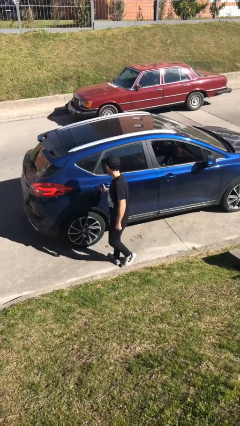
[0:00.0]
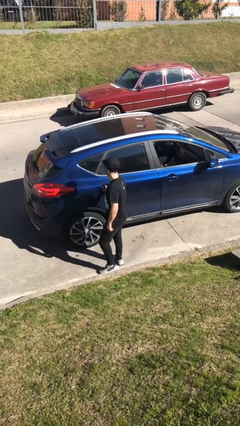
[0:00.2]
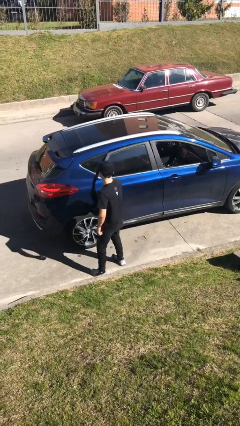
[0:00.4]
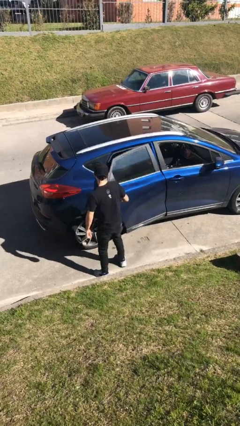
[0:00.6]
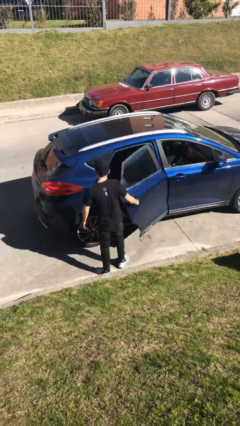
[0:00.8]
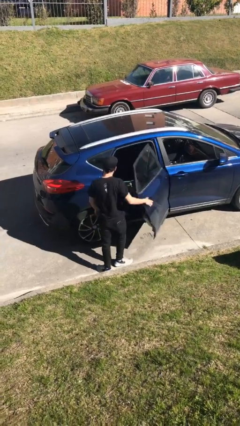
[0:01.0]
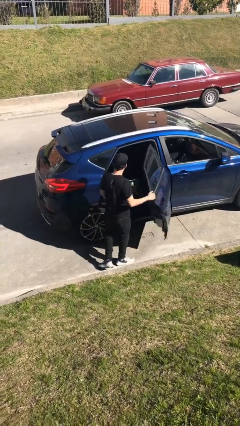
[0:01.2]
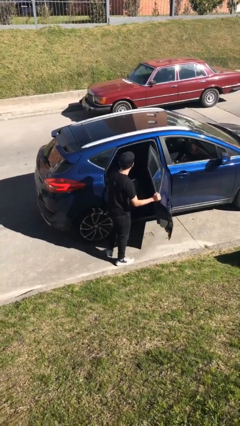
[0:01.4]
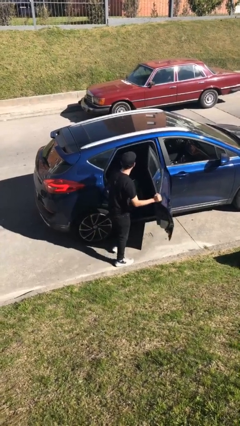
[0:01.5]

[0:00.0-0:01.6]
person opens car door

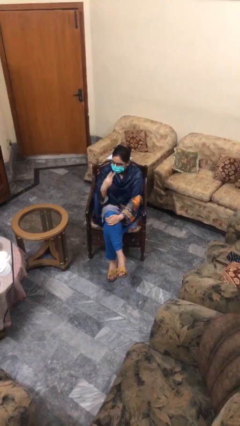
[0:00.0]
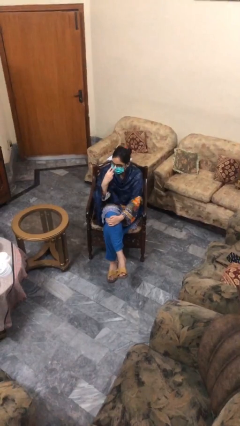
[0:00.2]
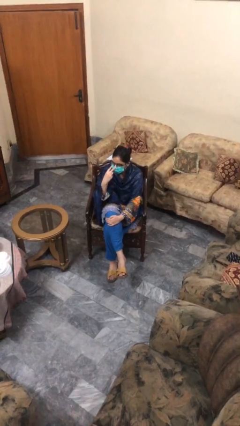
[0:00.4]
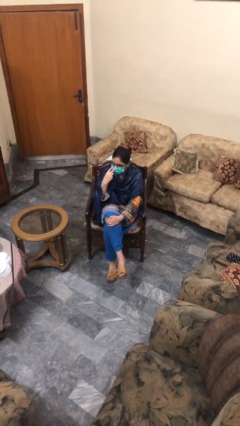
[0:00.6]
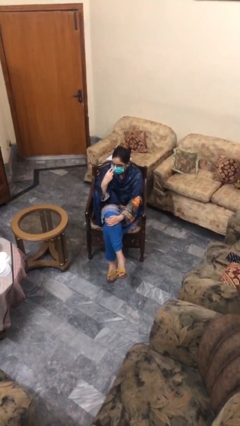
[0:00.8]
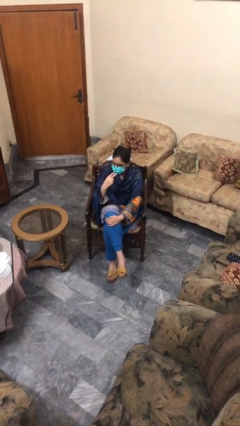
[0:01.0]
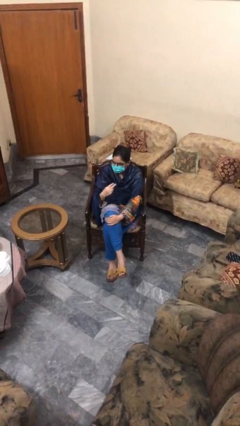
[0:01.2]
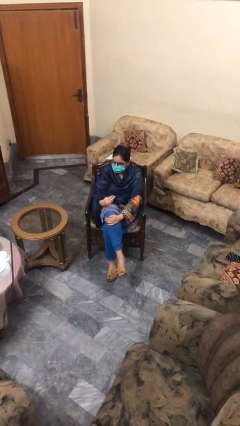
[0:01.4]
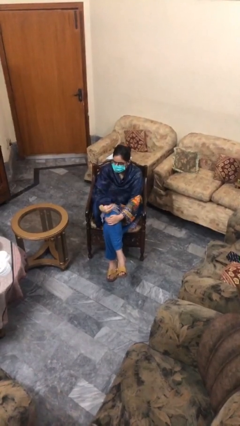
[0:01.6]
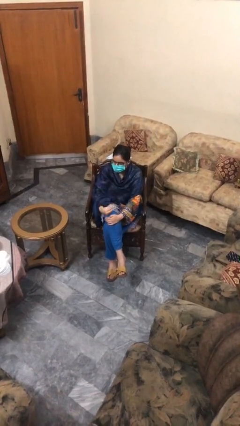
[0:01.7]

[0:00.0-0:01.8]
person gestures watch closely

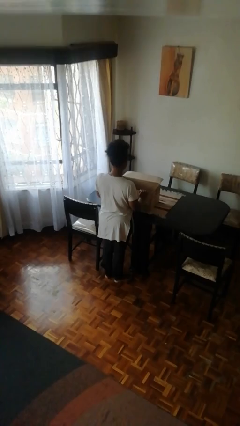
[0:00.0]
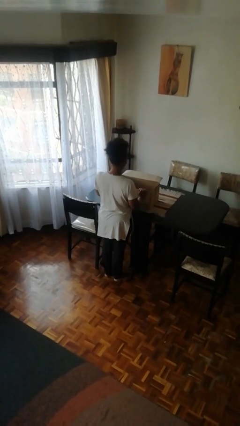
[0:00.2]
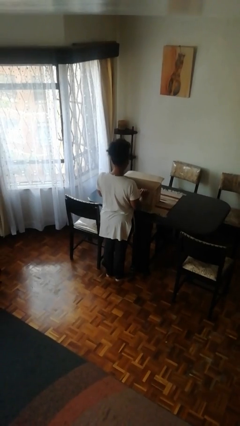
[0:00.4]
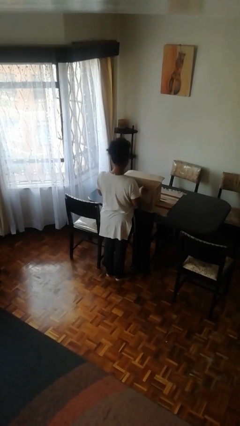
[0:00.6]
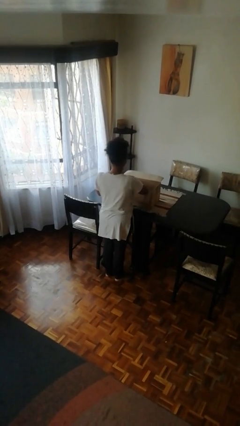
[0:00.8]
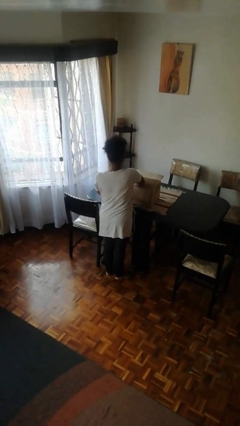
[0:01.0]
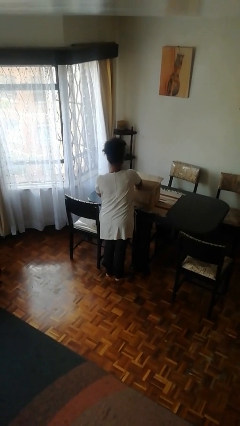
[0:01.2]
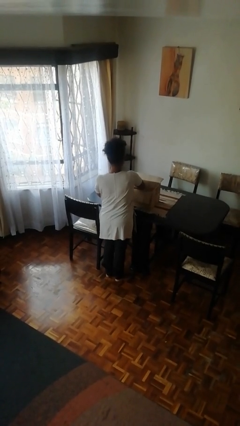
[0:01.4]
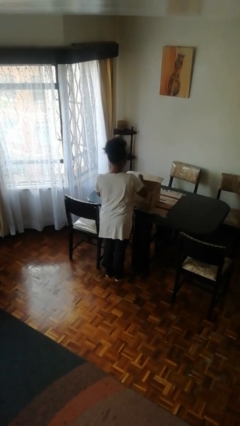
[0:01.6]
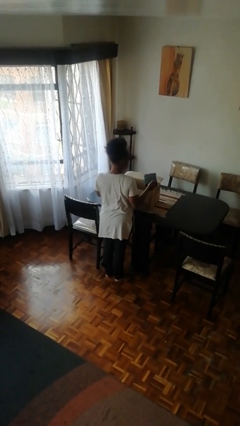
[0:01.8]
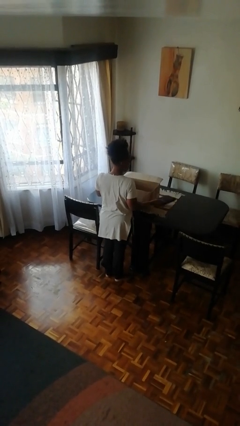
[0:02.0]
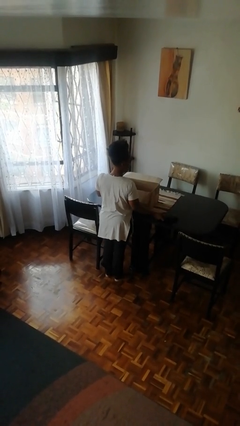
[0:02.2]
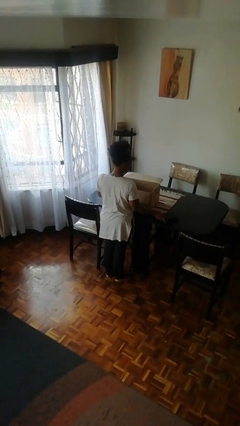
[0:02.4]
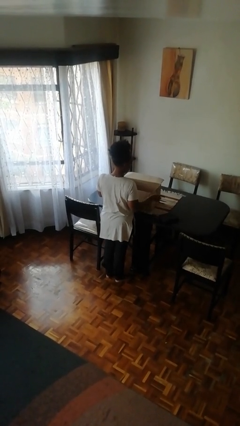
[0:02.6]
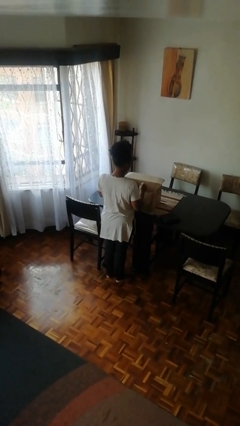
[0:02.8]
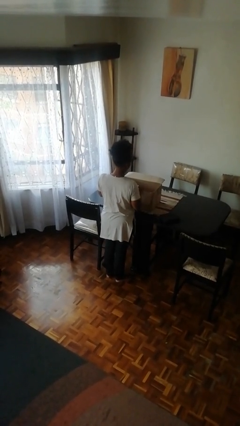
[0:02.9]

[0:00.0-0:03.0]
person takes object from box

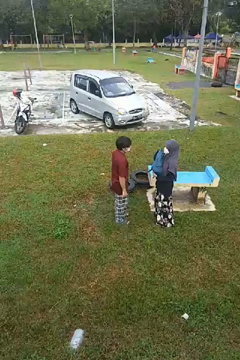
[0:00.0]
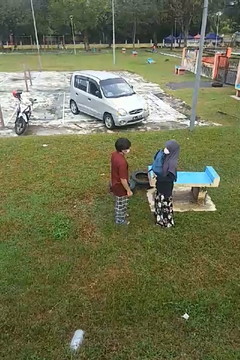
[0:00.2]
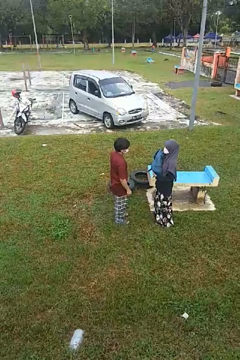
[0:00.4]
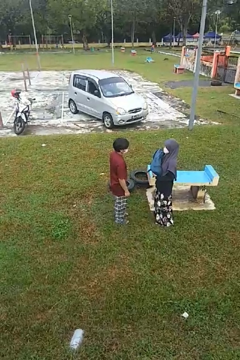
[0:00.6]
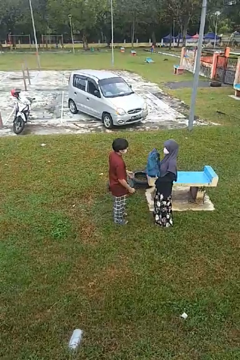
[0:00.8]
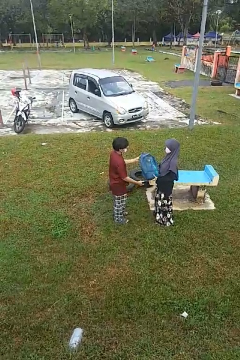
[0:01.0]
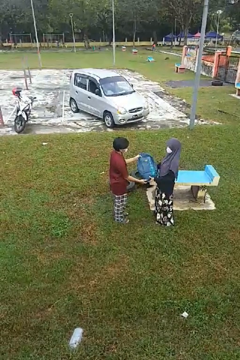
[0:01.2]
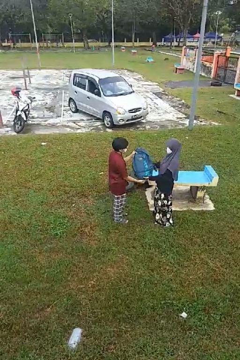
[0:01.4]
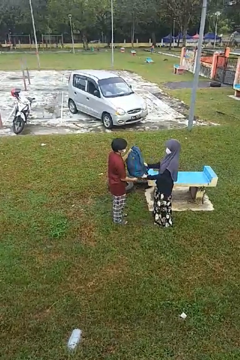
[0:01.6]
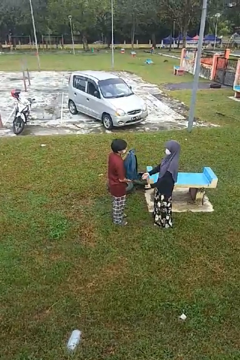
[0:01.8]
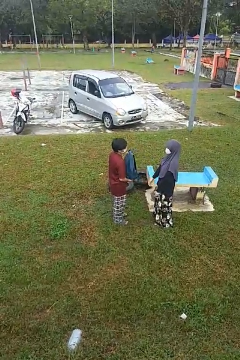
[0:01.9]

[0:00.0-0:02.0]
person transfers object to person

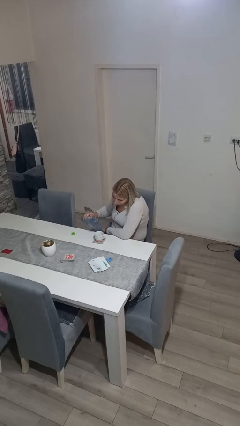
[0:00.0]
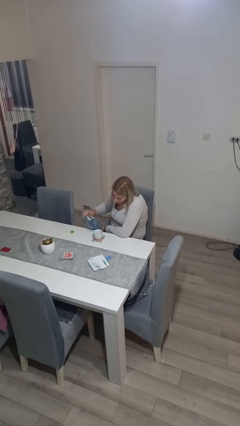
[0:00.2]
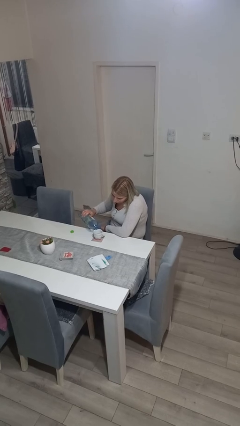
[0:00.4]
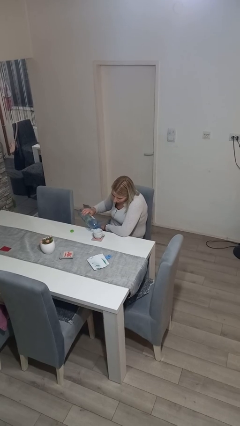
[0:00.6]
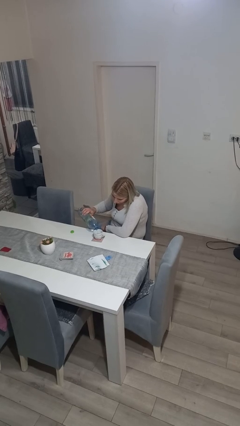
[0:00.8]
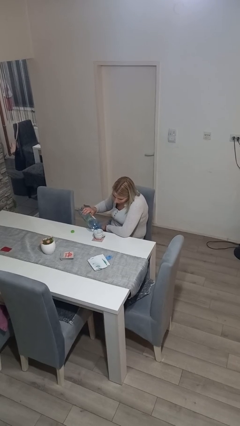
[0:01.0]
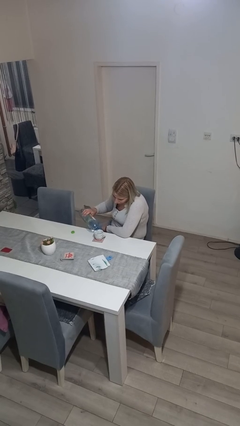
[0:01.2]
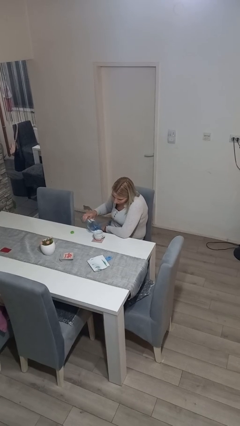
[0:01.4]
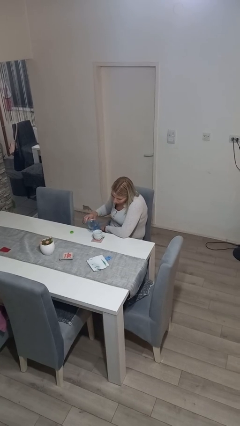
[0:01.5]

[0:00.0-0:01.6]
person pours liquid into cup

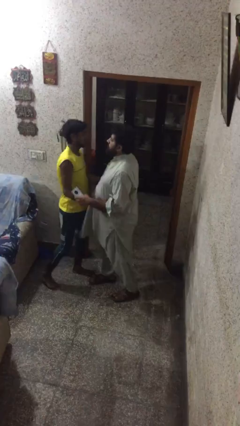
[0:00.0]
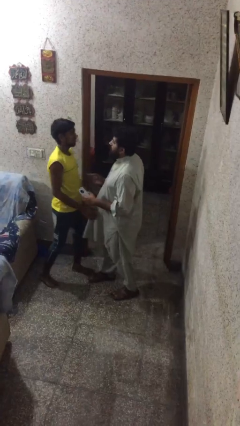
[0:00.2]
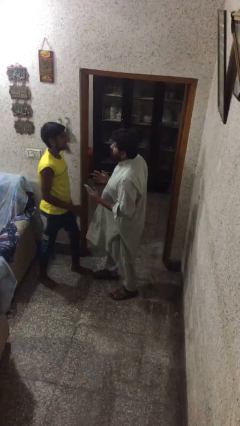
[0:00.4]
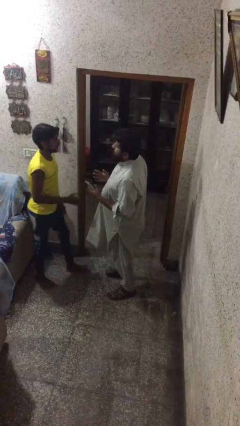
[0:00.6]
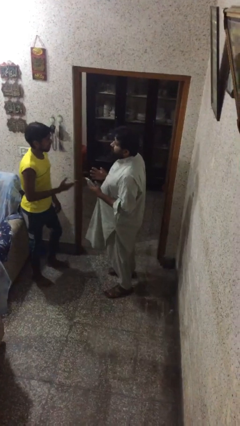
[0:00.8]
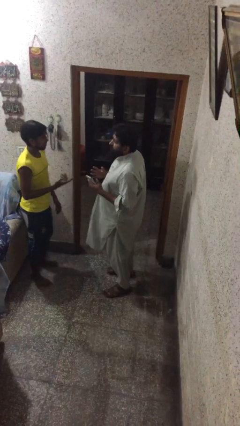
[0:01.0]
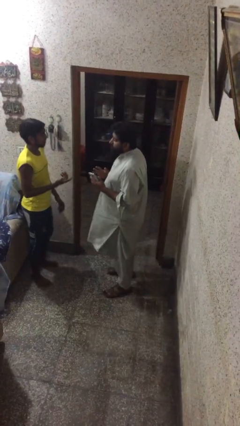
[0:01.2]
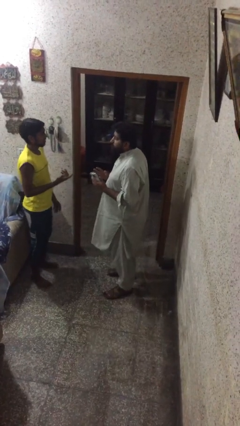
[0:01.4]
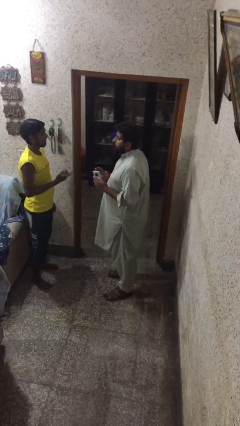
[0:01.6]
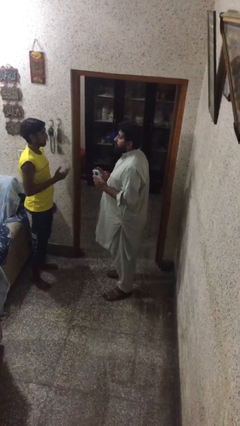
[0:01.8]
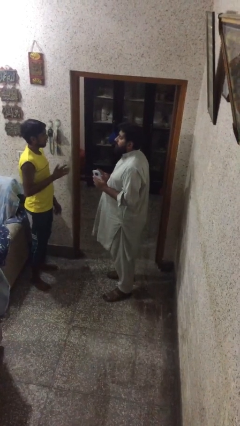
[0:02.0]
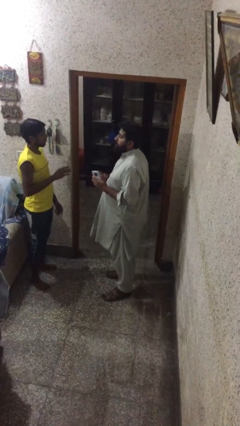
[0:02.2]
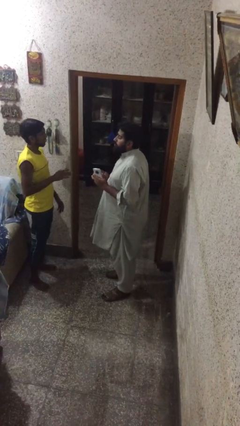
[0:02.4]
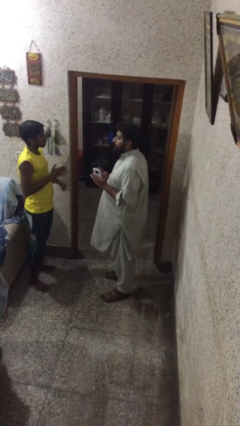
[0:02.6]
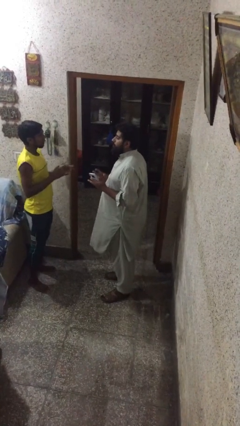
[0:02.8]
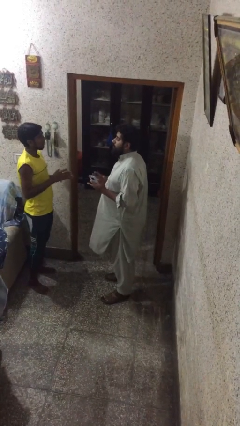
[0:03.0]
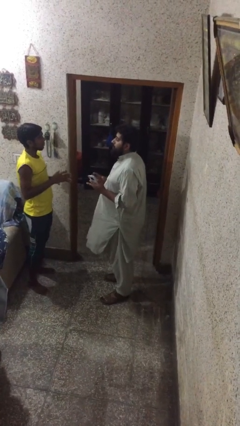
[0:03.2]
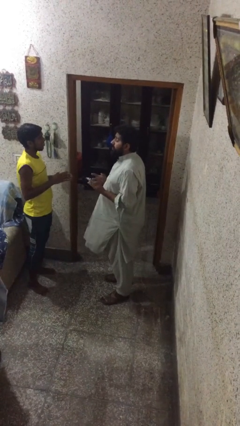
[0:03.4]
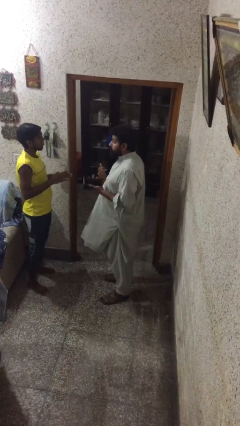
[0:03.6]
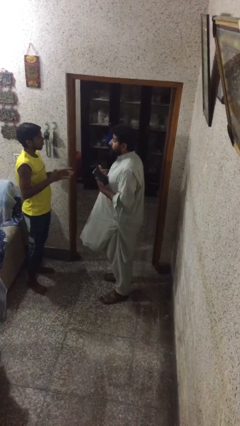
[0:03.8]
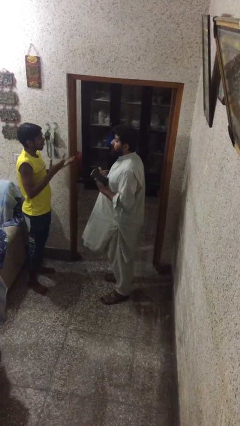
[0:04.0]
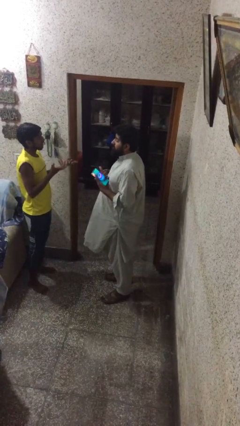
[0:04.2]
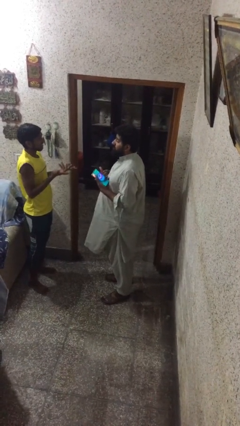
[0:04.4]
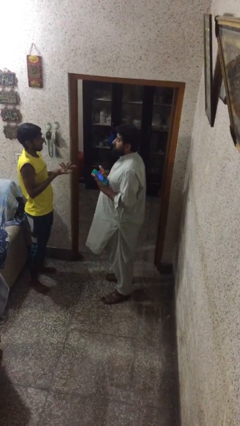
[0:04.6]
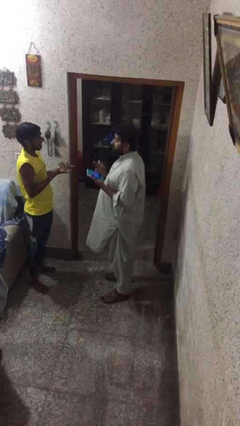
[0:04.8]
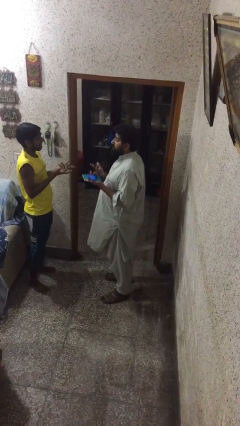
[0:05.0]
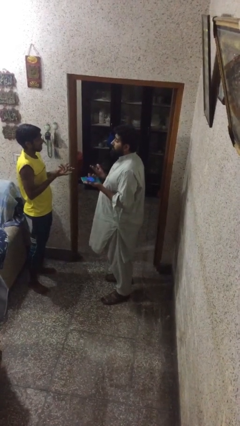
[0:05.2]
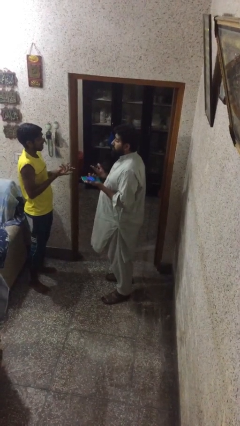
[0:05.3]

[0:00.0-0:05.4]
person talks to person

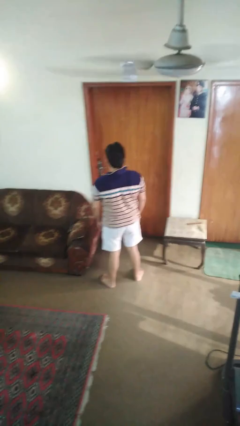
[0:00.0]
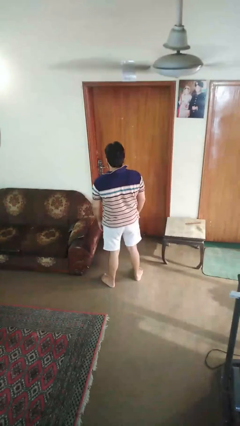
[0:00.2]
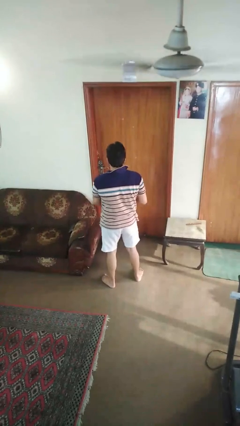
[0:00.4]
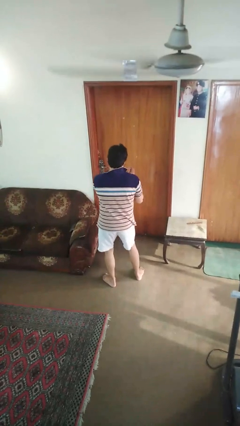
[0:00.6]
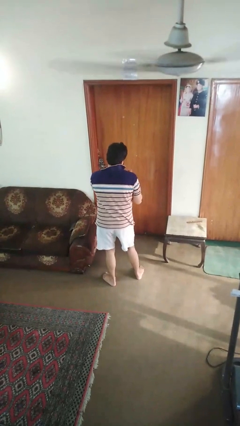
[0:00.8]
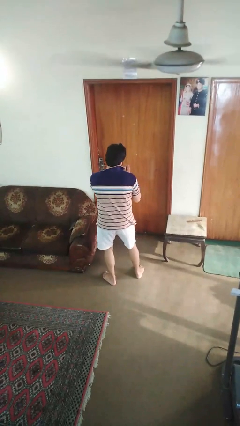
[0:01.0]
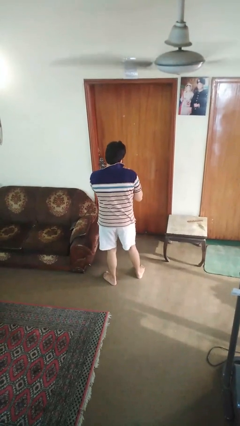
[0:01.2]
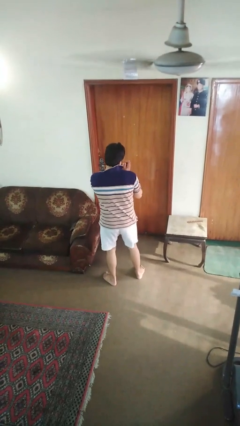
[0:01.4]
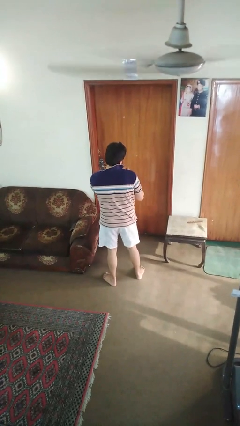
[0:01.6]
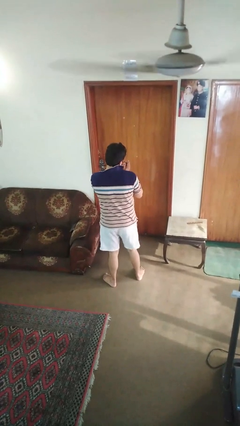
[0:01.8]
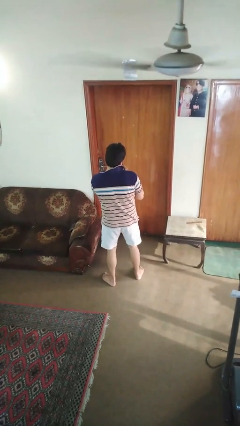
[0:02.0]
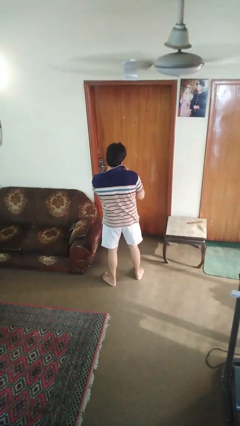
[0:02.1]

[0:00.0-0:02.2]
person dances in place
